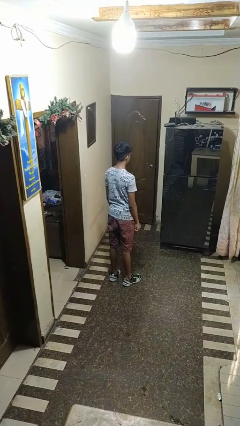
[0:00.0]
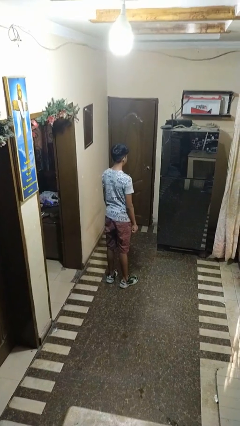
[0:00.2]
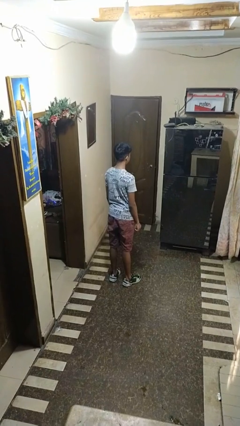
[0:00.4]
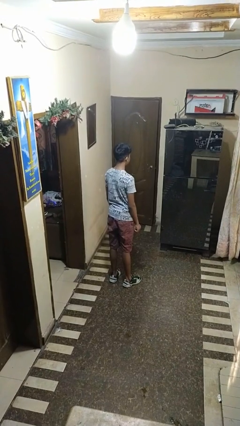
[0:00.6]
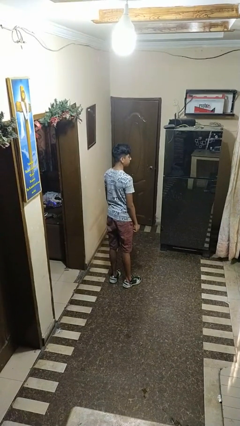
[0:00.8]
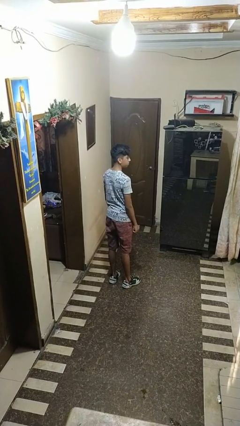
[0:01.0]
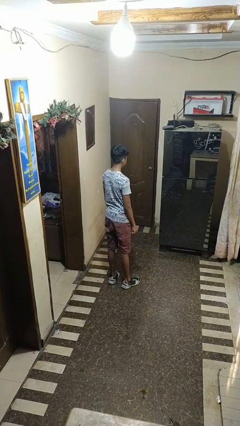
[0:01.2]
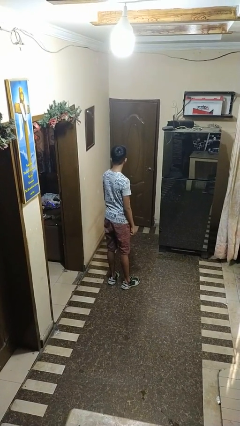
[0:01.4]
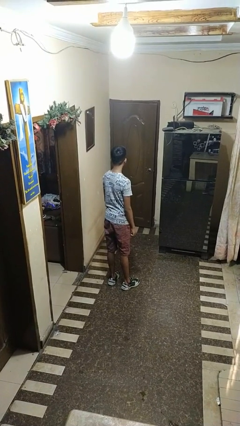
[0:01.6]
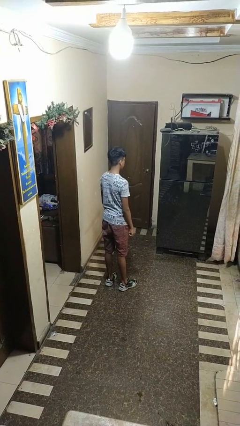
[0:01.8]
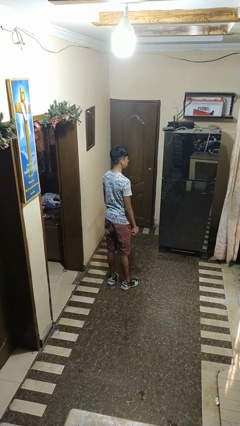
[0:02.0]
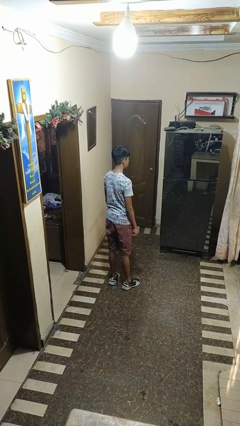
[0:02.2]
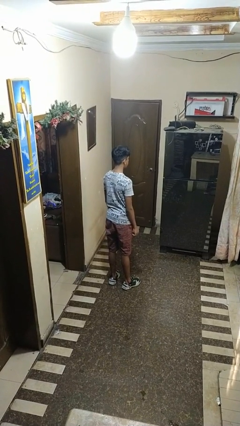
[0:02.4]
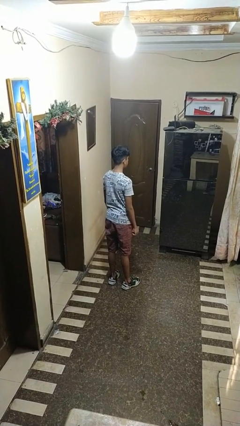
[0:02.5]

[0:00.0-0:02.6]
person nods head

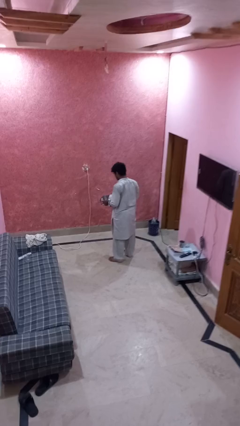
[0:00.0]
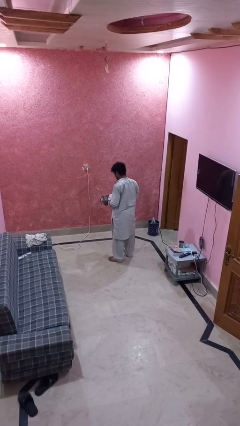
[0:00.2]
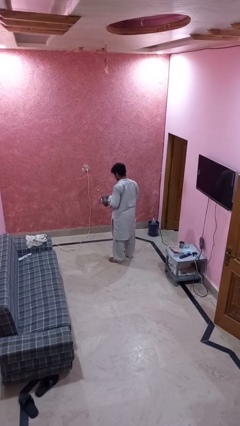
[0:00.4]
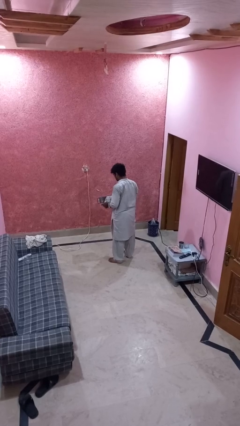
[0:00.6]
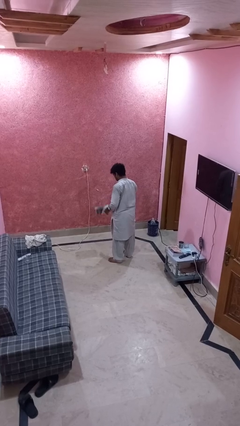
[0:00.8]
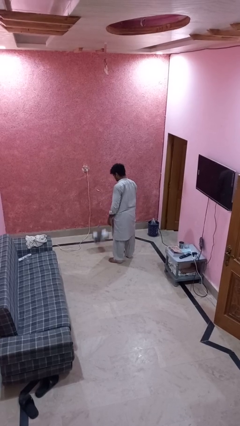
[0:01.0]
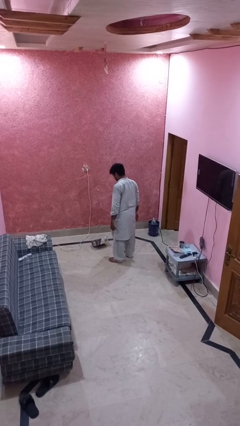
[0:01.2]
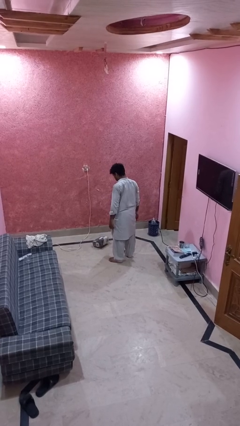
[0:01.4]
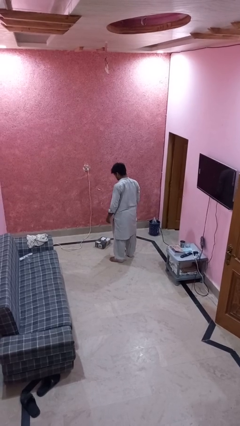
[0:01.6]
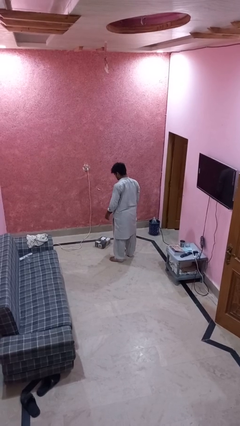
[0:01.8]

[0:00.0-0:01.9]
person throws object to ground

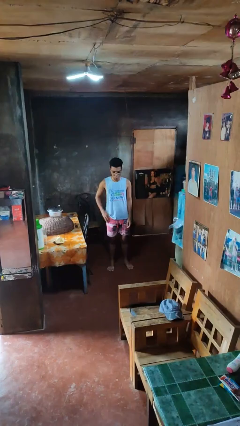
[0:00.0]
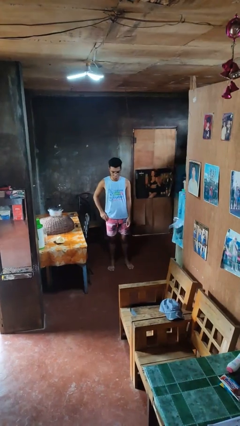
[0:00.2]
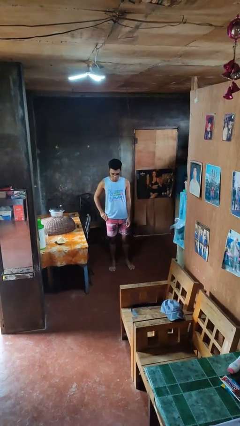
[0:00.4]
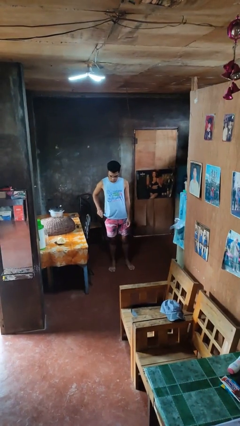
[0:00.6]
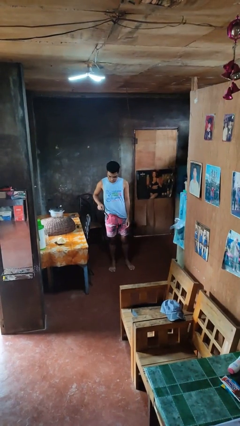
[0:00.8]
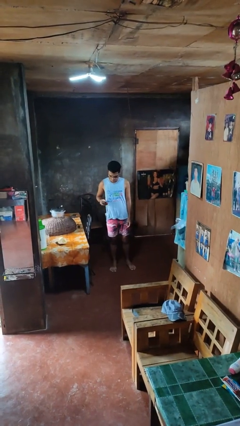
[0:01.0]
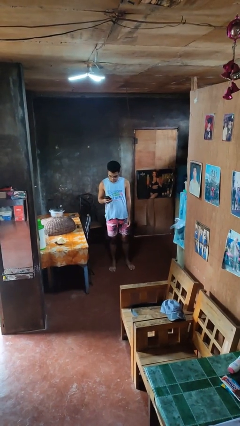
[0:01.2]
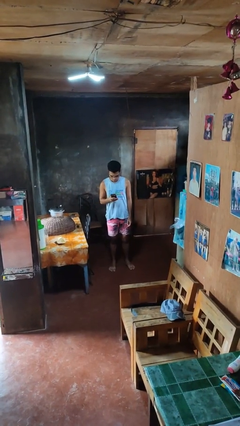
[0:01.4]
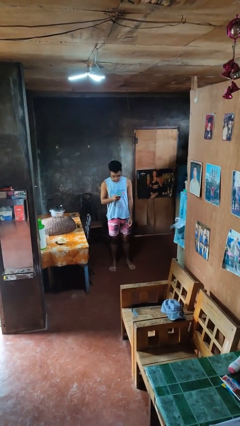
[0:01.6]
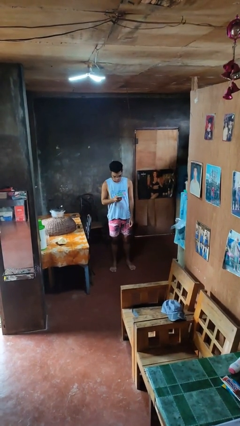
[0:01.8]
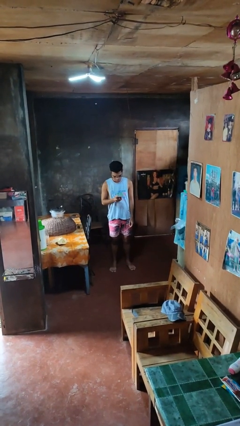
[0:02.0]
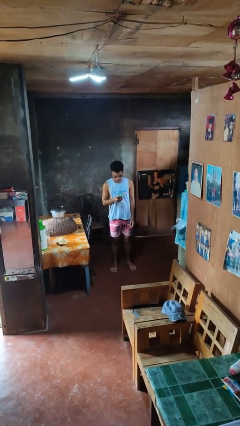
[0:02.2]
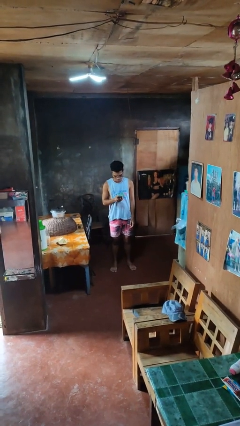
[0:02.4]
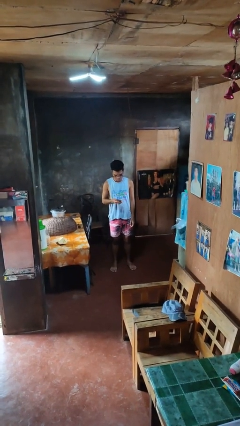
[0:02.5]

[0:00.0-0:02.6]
person takes phone from pocket

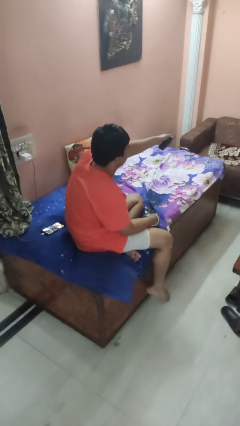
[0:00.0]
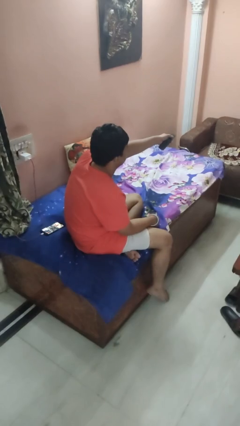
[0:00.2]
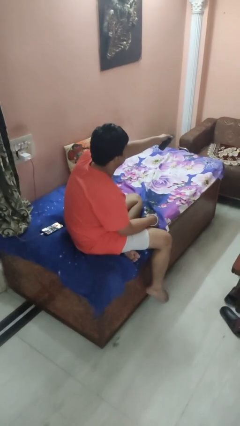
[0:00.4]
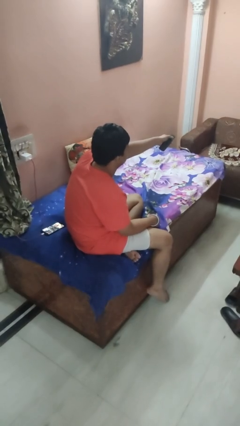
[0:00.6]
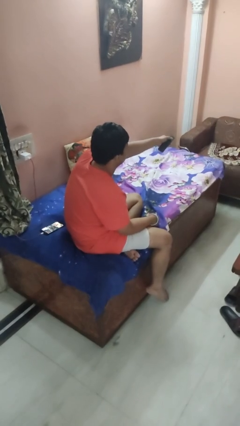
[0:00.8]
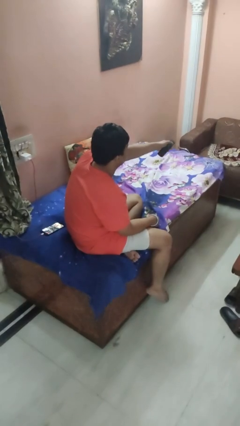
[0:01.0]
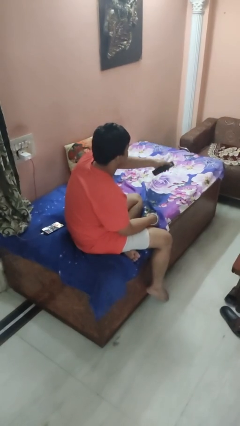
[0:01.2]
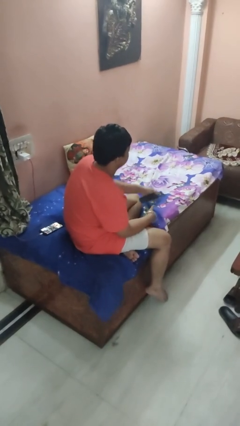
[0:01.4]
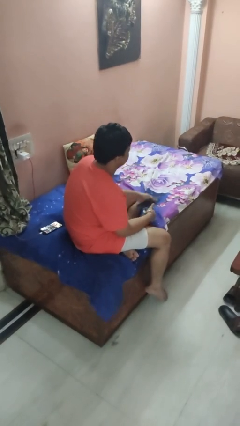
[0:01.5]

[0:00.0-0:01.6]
person uses television remote

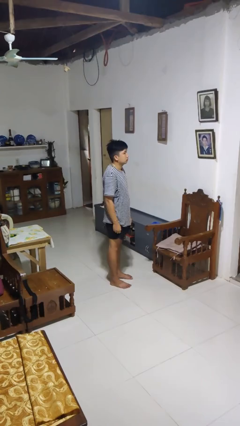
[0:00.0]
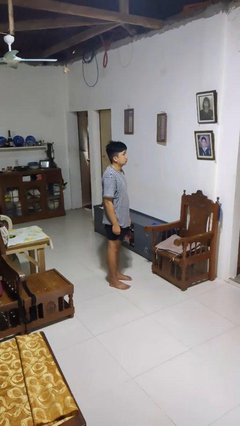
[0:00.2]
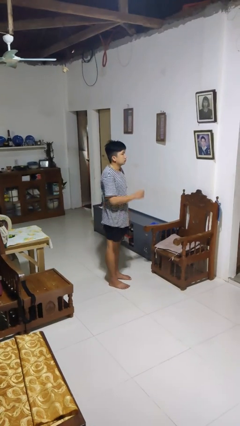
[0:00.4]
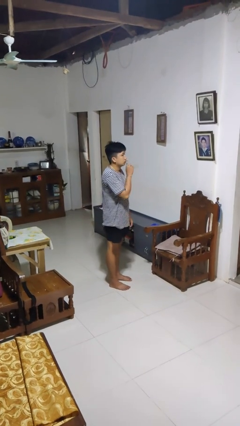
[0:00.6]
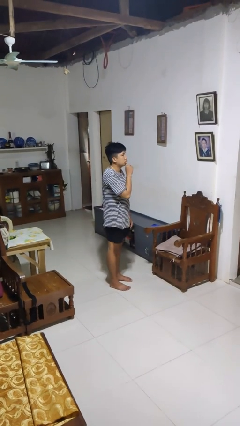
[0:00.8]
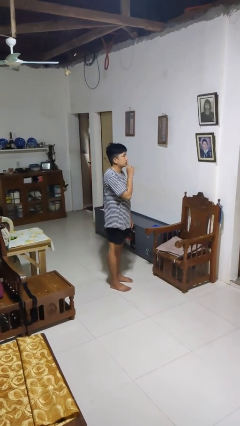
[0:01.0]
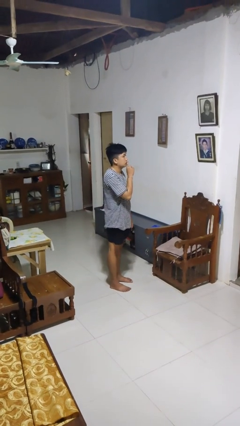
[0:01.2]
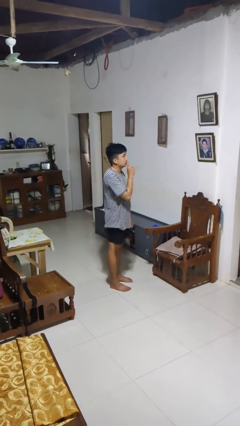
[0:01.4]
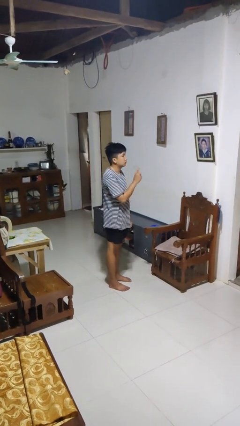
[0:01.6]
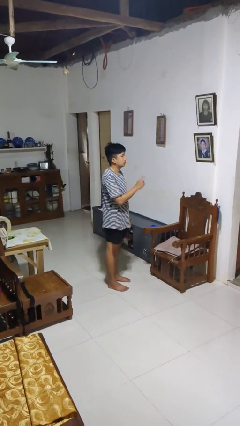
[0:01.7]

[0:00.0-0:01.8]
person gestures be quiet

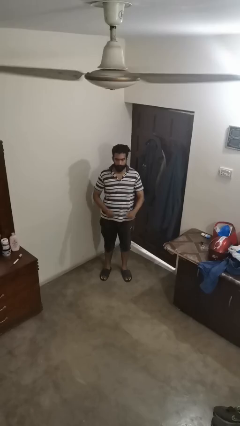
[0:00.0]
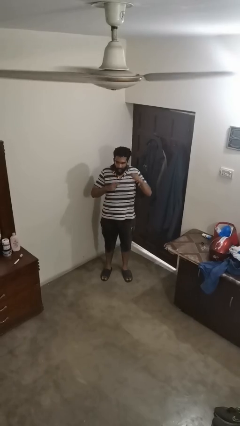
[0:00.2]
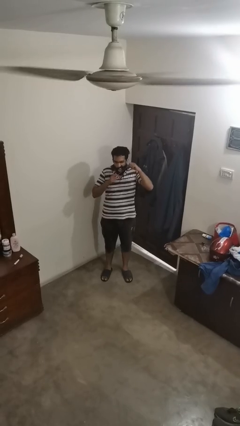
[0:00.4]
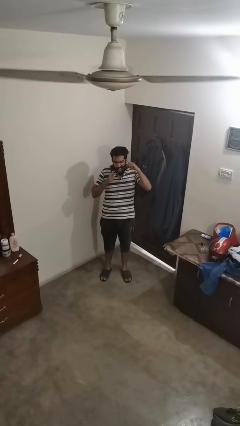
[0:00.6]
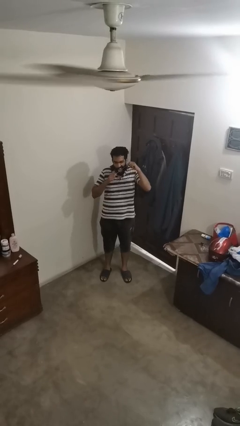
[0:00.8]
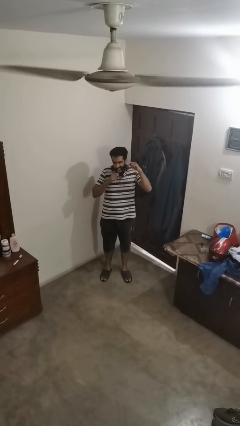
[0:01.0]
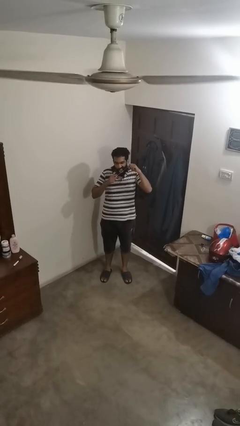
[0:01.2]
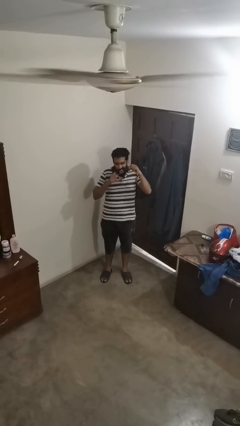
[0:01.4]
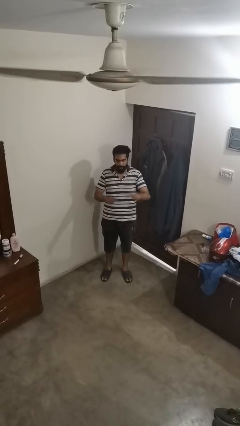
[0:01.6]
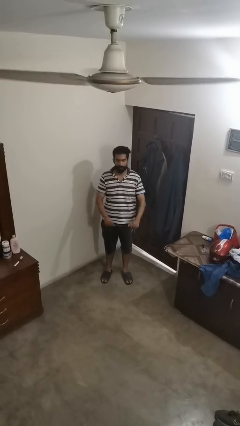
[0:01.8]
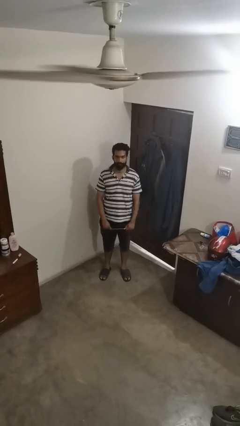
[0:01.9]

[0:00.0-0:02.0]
person flosses

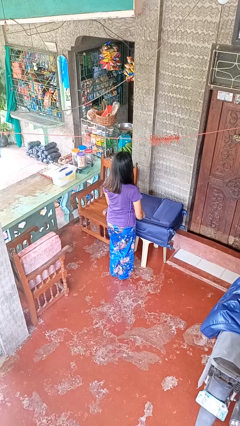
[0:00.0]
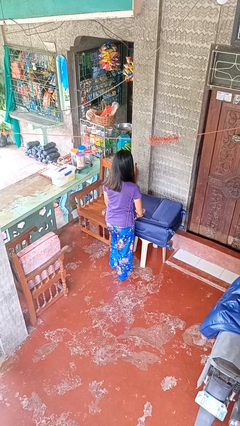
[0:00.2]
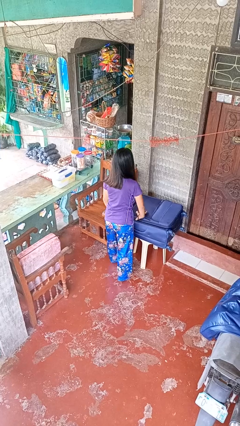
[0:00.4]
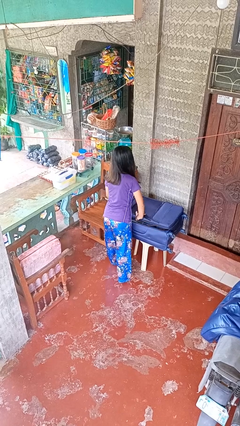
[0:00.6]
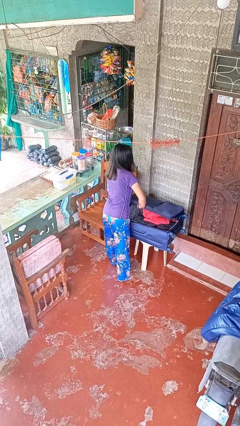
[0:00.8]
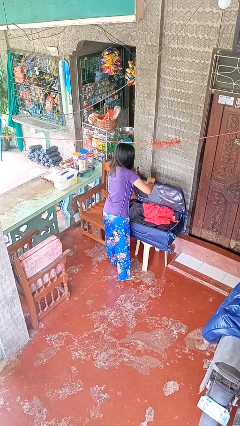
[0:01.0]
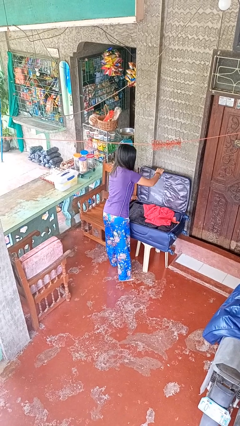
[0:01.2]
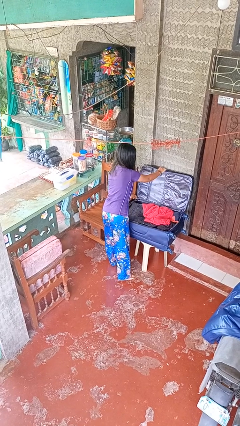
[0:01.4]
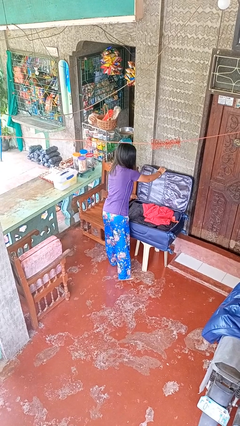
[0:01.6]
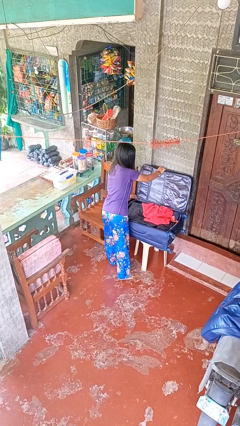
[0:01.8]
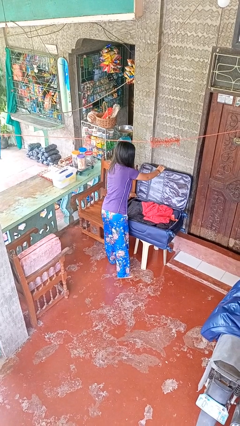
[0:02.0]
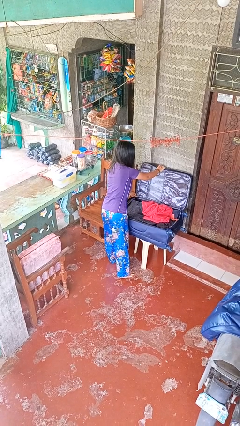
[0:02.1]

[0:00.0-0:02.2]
person opens suitcase

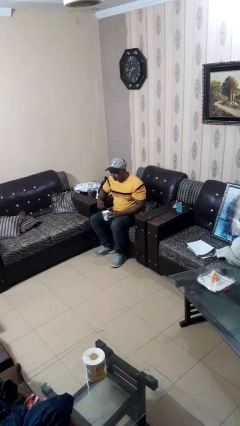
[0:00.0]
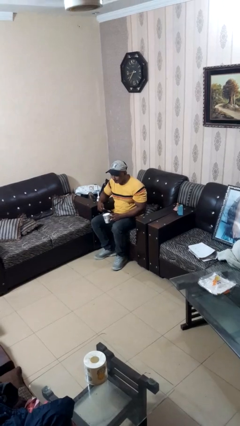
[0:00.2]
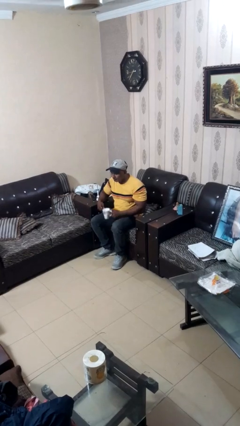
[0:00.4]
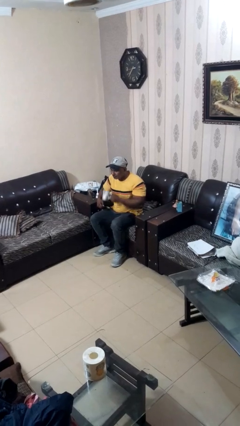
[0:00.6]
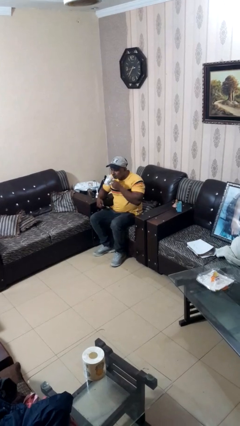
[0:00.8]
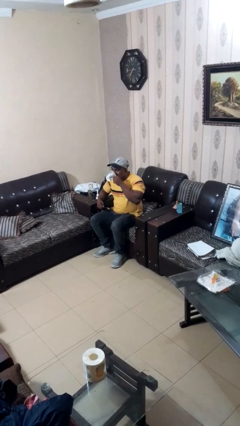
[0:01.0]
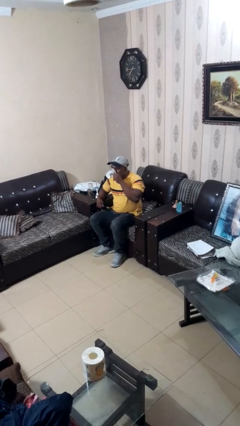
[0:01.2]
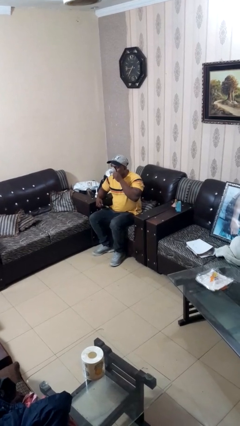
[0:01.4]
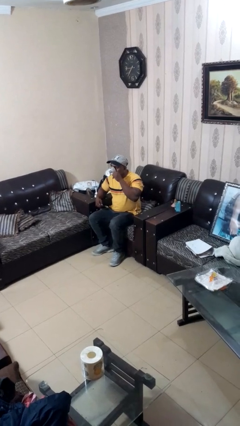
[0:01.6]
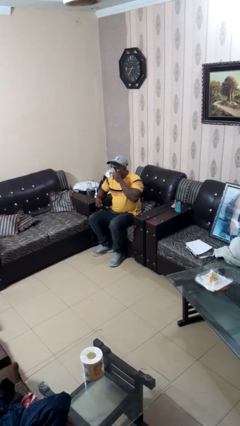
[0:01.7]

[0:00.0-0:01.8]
person drinks from mug

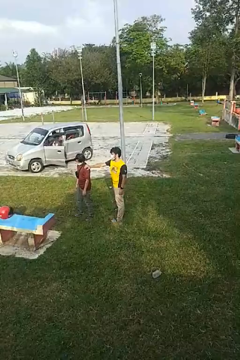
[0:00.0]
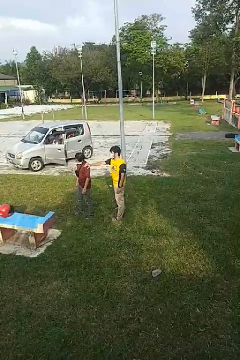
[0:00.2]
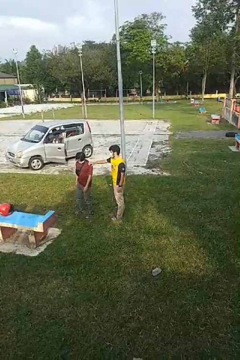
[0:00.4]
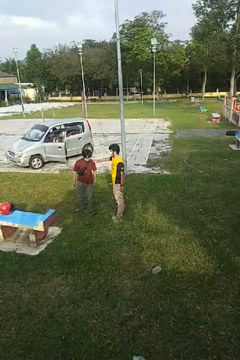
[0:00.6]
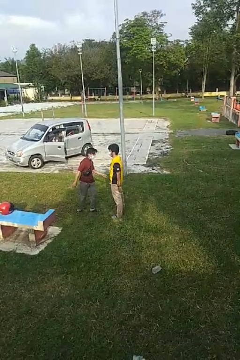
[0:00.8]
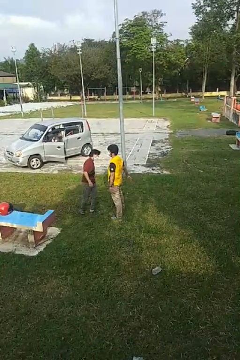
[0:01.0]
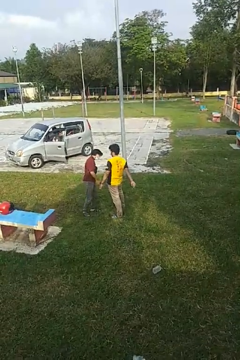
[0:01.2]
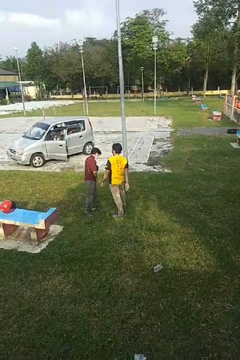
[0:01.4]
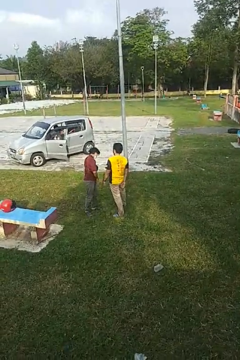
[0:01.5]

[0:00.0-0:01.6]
person spins person around
